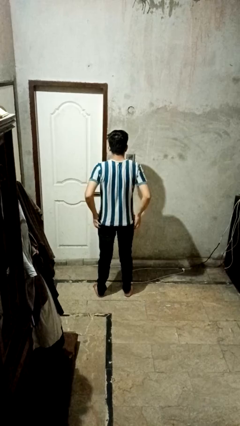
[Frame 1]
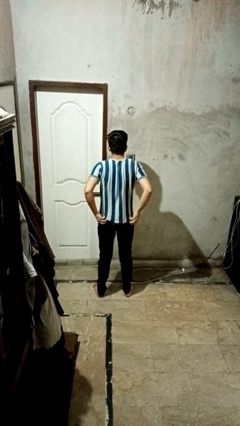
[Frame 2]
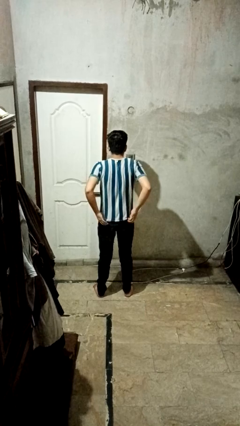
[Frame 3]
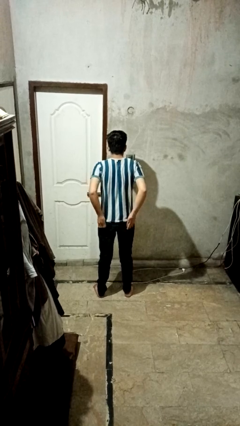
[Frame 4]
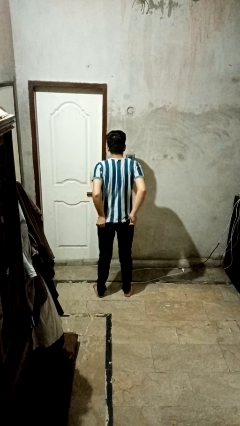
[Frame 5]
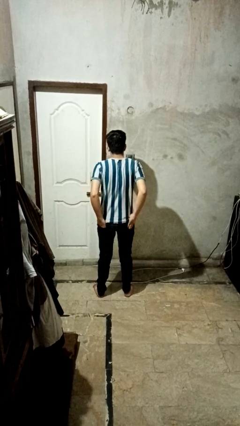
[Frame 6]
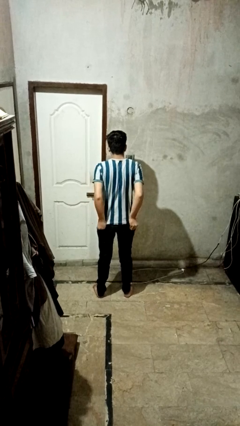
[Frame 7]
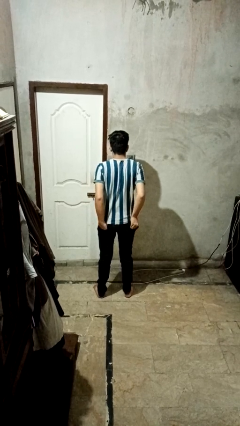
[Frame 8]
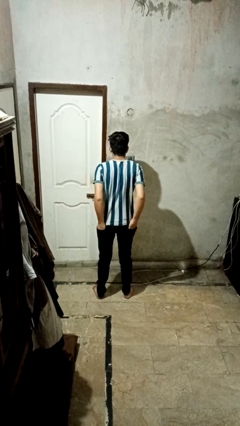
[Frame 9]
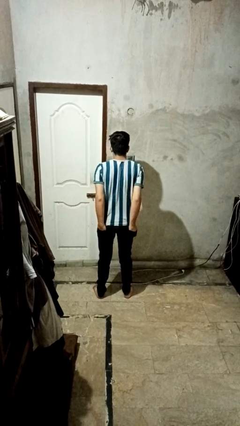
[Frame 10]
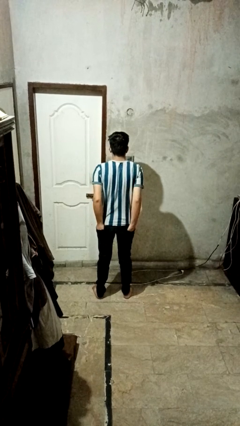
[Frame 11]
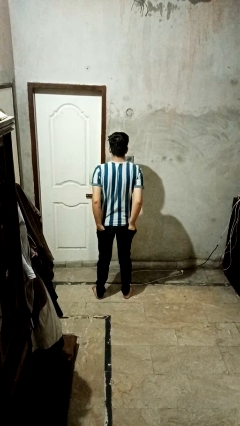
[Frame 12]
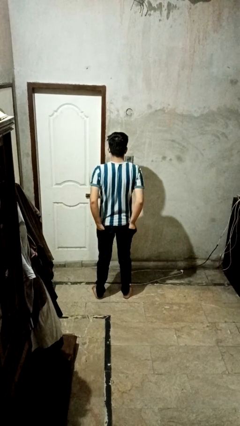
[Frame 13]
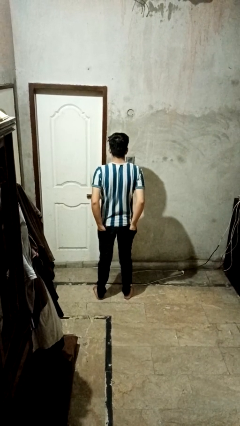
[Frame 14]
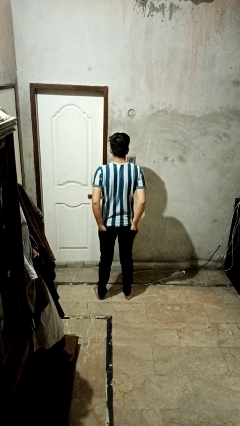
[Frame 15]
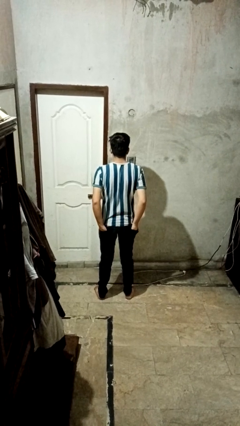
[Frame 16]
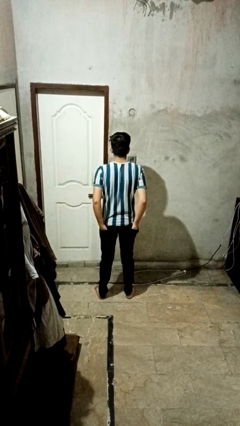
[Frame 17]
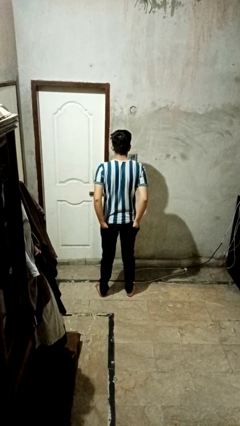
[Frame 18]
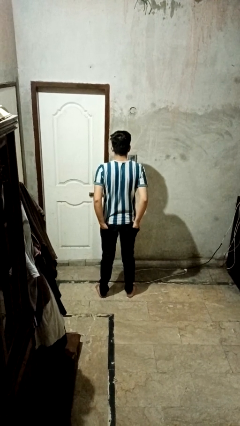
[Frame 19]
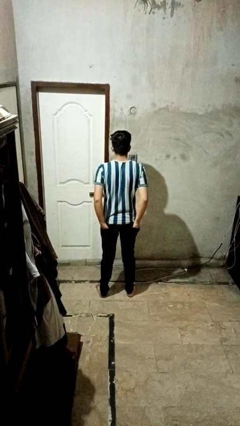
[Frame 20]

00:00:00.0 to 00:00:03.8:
person puts hands in back pockets

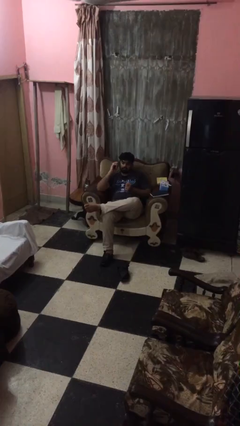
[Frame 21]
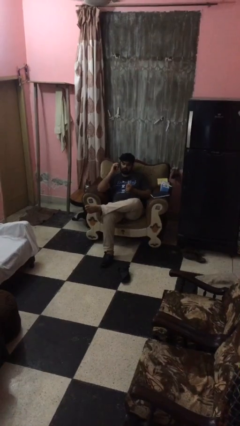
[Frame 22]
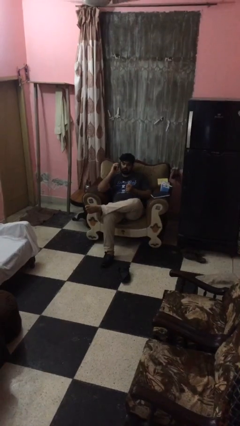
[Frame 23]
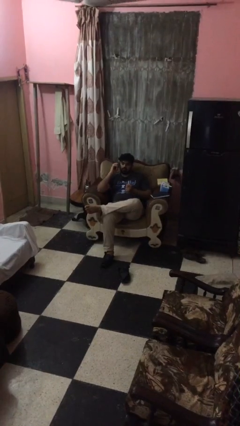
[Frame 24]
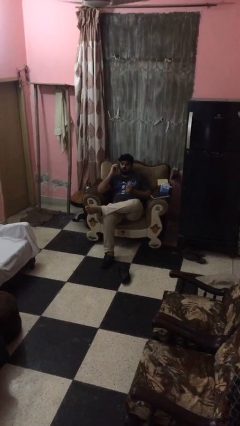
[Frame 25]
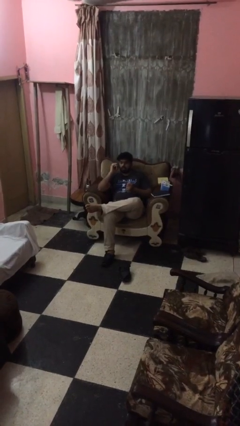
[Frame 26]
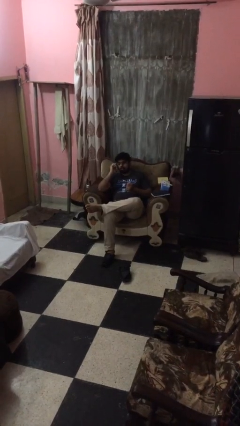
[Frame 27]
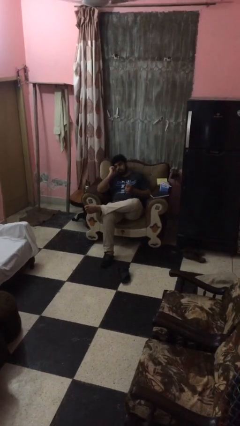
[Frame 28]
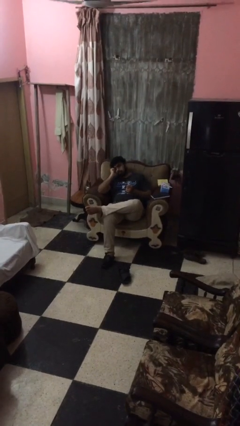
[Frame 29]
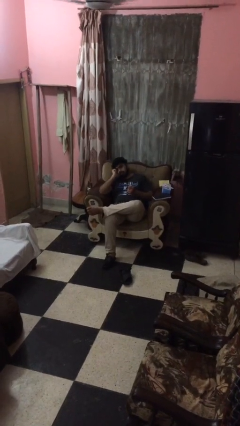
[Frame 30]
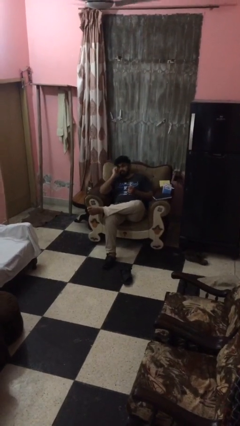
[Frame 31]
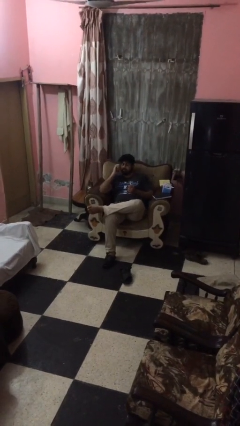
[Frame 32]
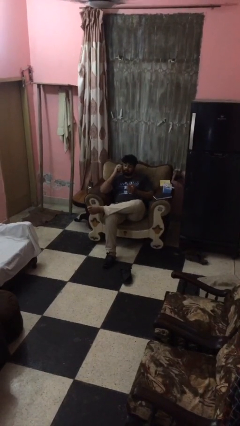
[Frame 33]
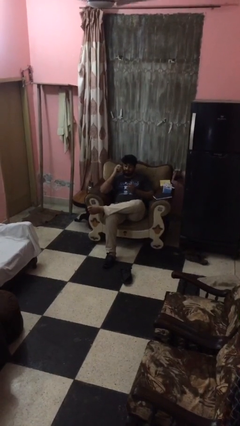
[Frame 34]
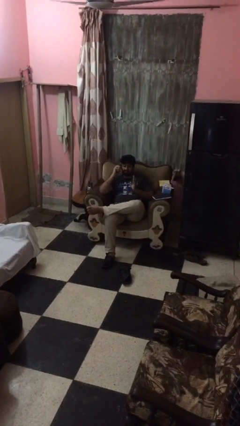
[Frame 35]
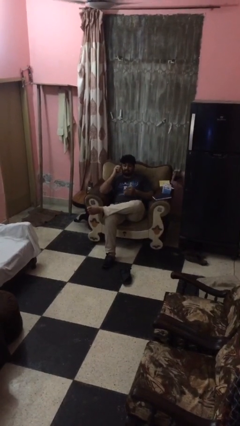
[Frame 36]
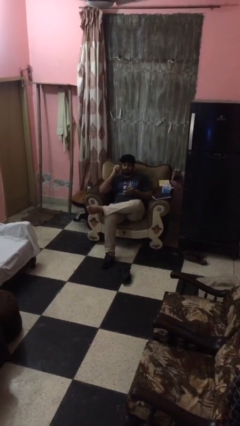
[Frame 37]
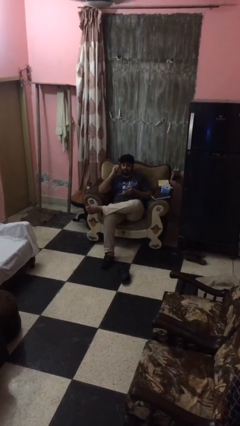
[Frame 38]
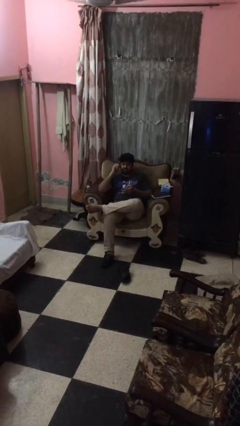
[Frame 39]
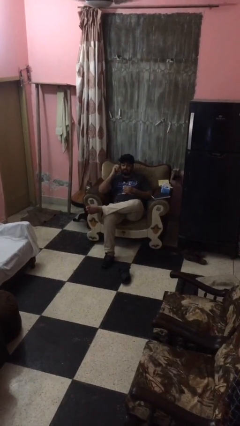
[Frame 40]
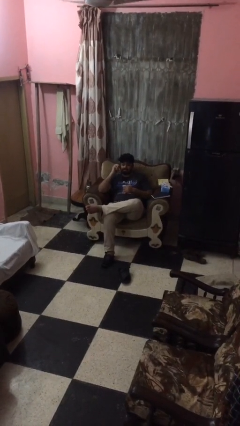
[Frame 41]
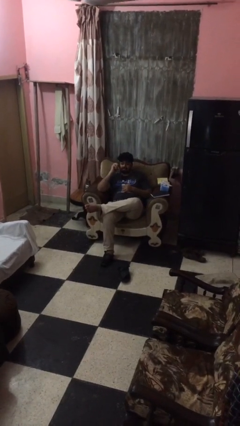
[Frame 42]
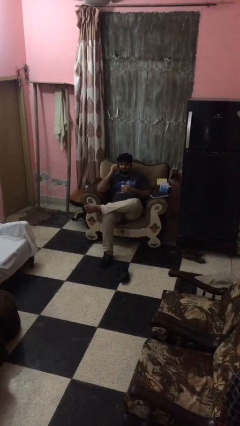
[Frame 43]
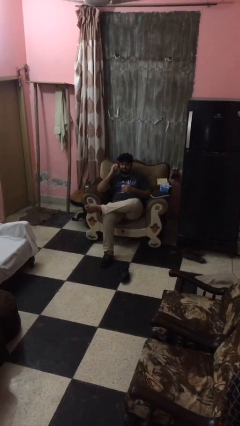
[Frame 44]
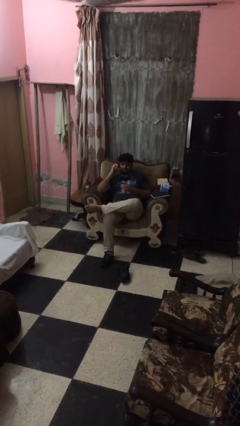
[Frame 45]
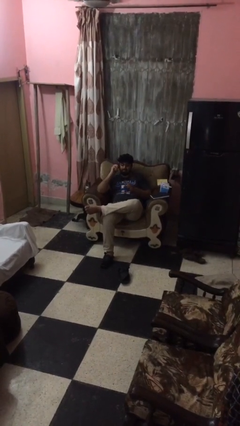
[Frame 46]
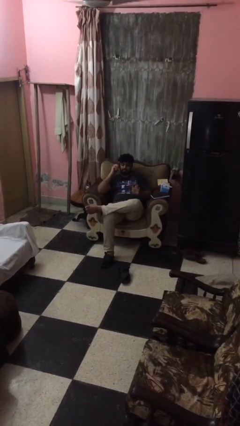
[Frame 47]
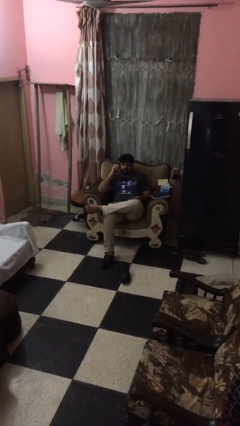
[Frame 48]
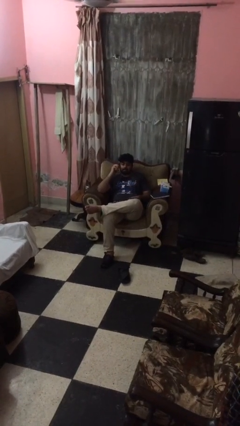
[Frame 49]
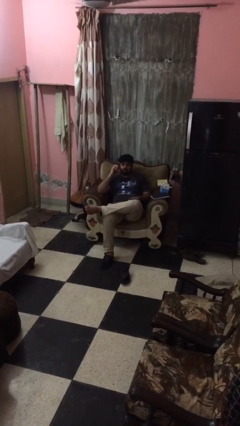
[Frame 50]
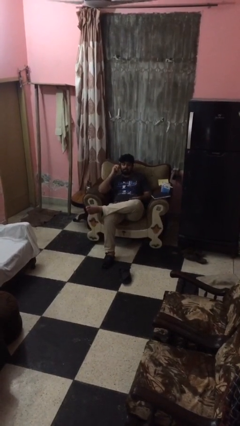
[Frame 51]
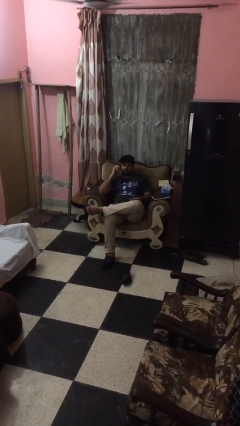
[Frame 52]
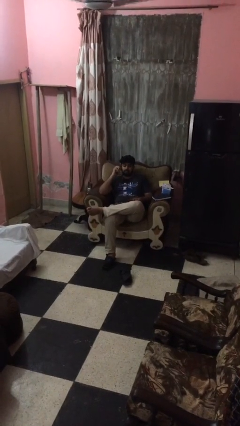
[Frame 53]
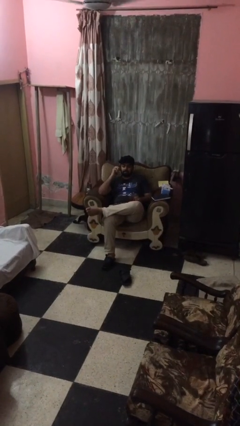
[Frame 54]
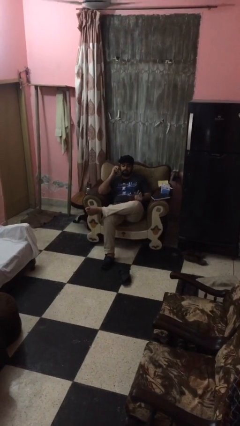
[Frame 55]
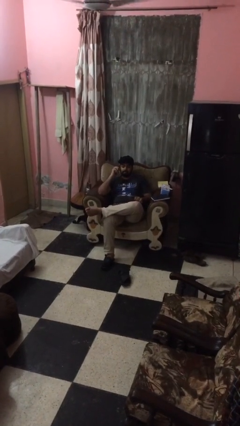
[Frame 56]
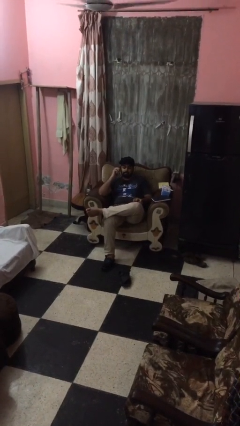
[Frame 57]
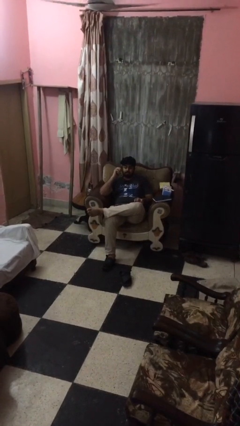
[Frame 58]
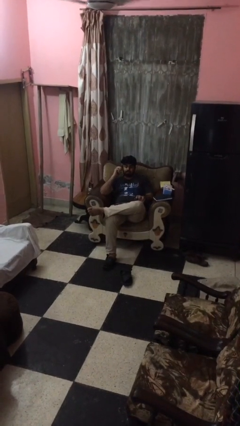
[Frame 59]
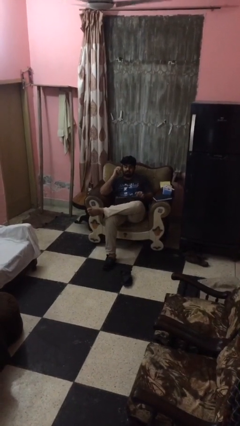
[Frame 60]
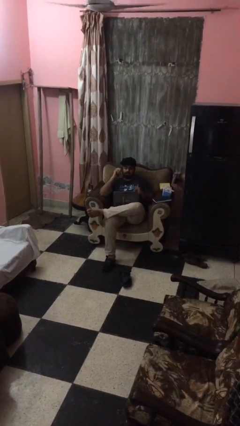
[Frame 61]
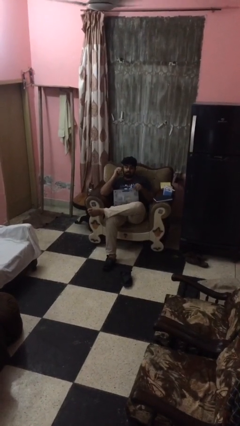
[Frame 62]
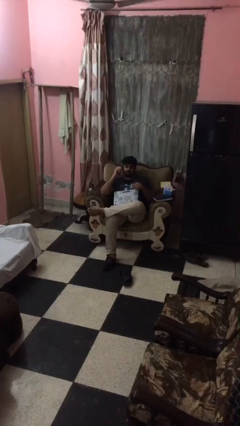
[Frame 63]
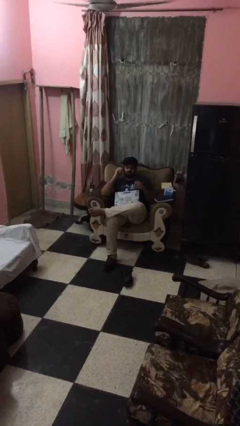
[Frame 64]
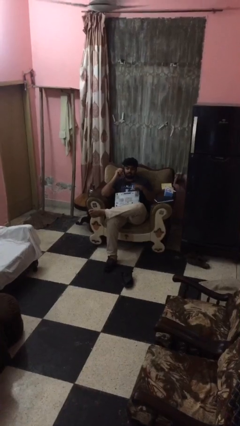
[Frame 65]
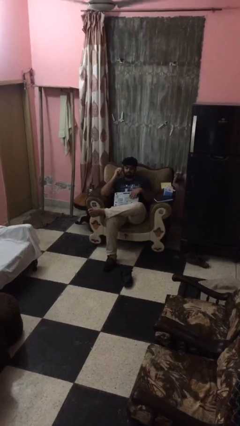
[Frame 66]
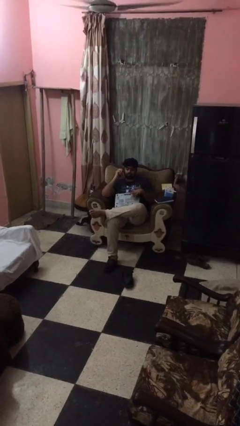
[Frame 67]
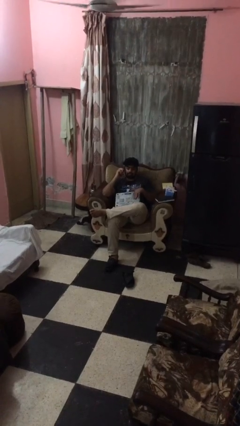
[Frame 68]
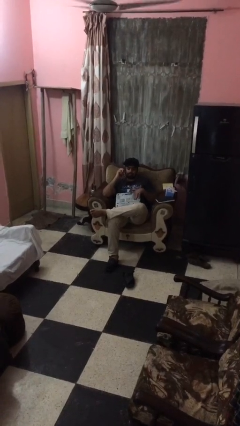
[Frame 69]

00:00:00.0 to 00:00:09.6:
person talks on phone

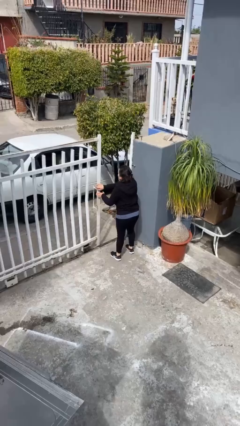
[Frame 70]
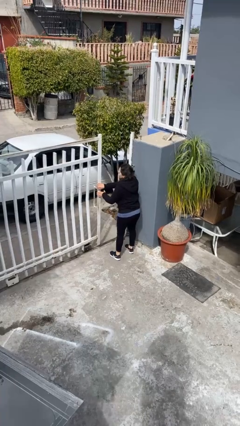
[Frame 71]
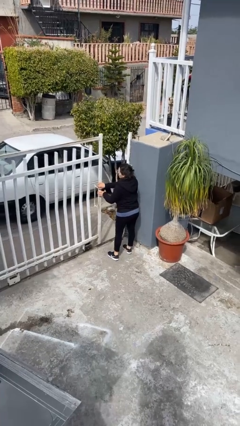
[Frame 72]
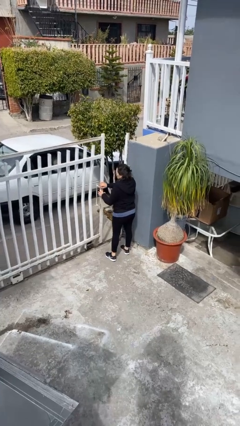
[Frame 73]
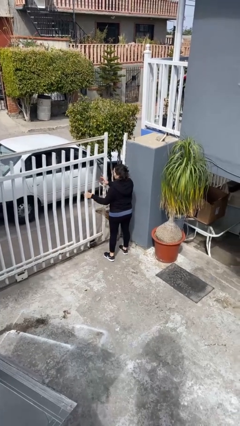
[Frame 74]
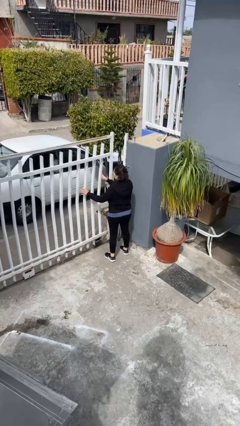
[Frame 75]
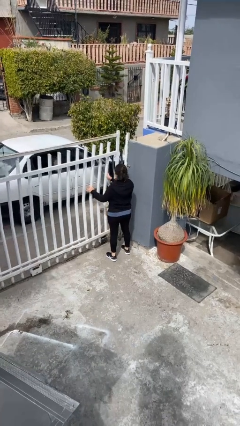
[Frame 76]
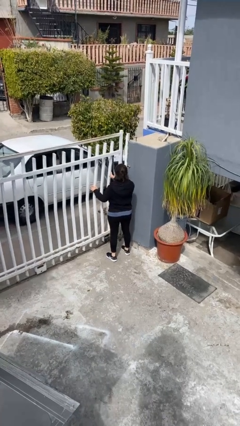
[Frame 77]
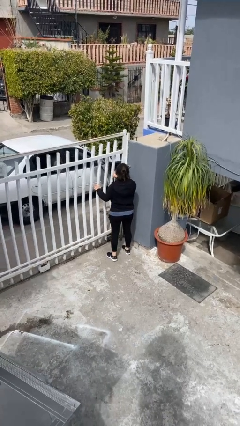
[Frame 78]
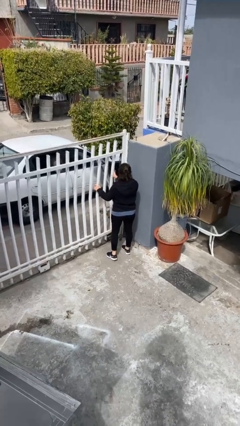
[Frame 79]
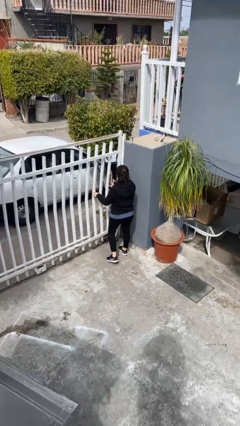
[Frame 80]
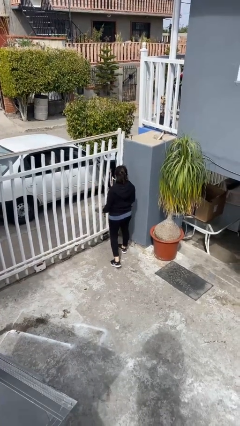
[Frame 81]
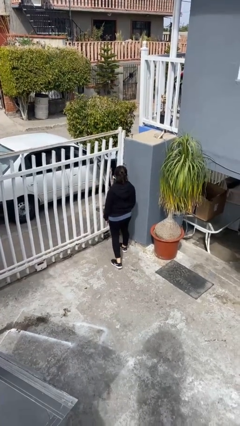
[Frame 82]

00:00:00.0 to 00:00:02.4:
person closes facility door

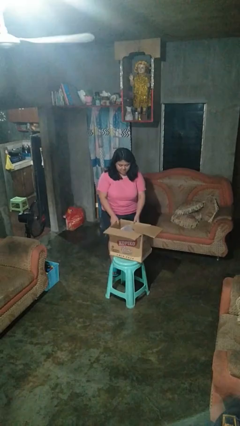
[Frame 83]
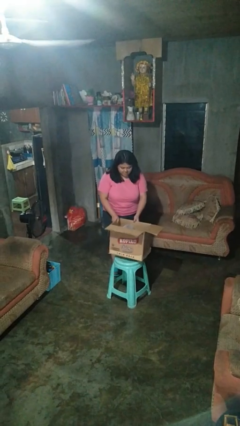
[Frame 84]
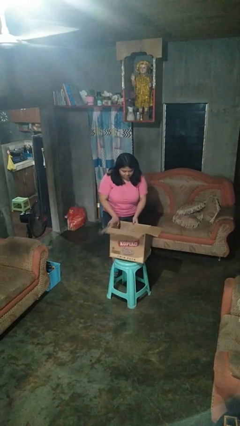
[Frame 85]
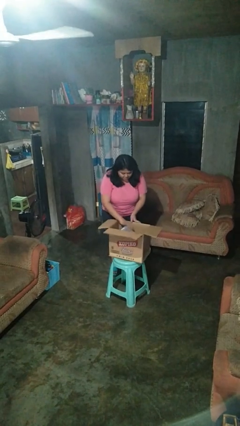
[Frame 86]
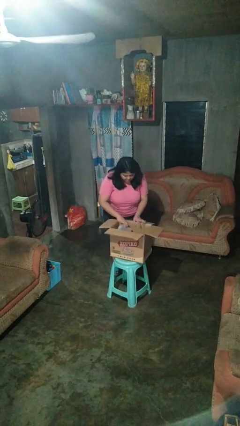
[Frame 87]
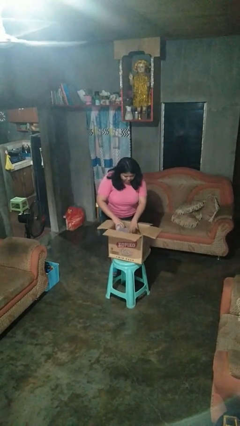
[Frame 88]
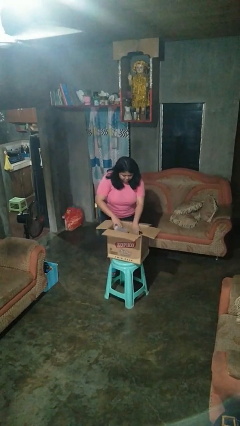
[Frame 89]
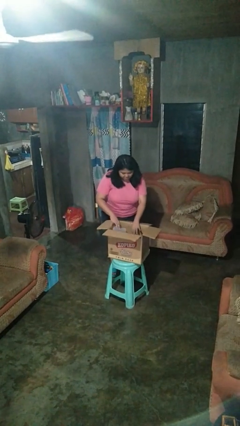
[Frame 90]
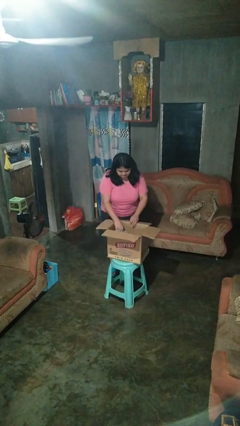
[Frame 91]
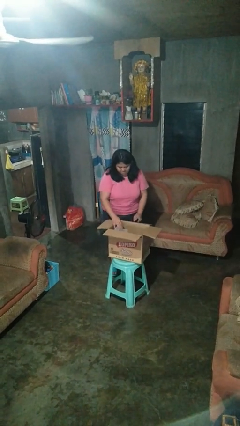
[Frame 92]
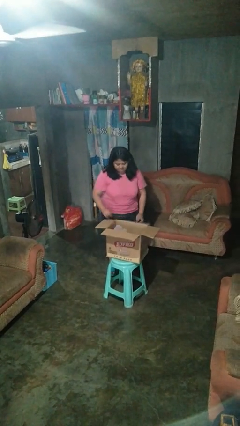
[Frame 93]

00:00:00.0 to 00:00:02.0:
person searches in box
